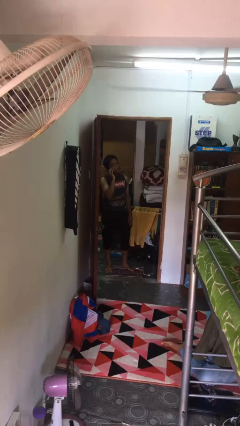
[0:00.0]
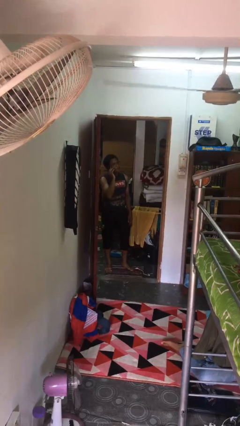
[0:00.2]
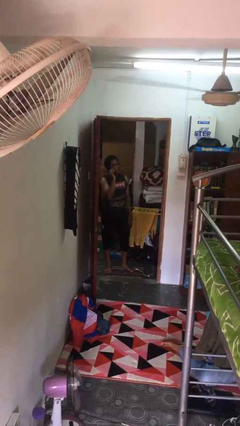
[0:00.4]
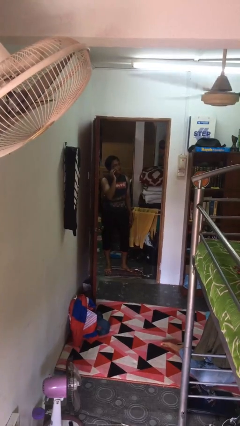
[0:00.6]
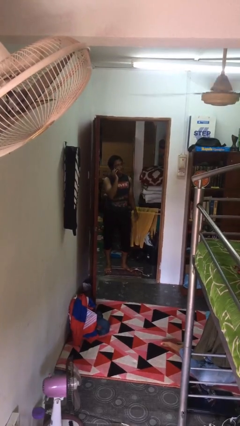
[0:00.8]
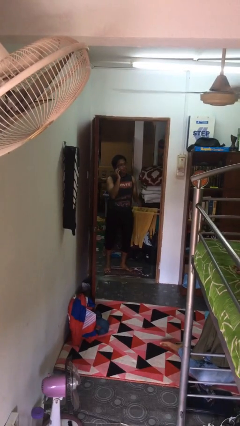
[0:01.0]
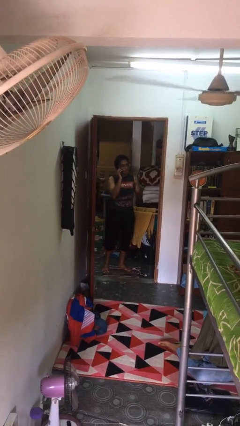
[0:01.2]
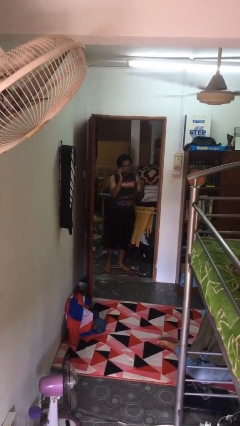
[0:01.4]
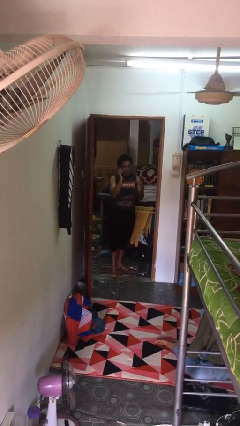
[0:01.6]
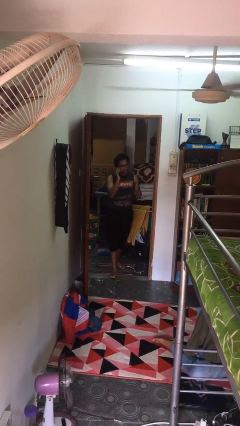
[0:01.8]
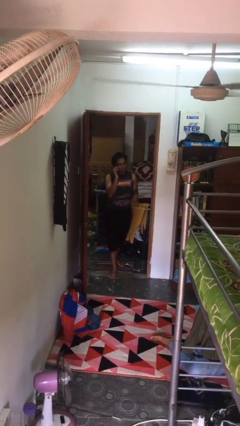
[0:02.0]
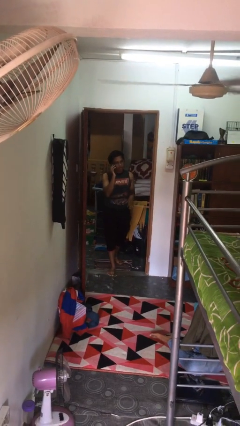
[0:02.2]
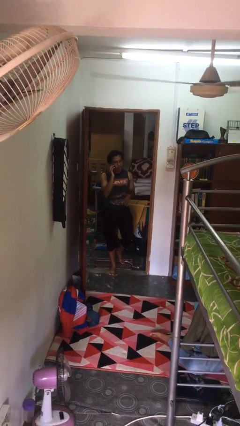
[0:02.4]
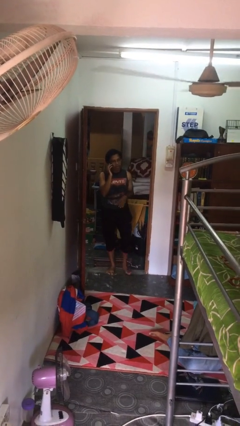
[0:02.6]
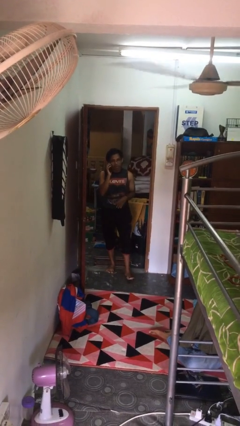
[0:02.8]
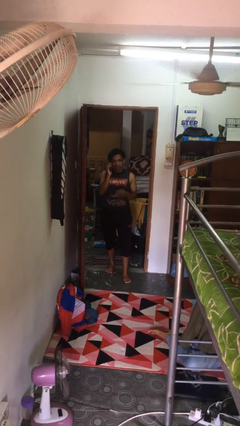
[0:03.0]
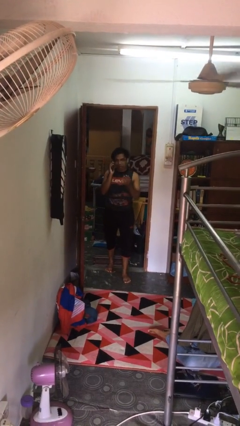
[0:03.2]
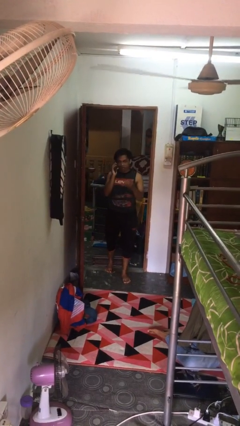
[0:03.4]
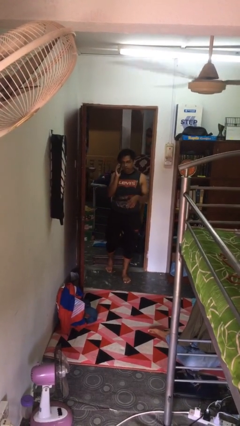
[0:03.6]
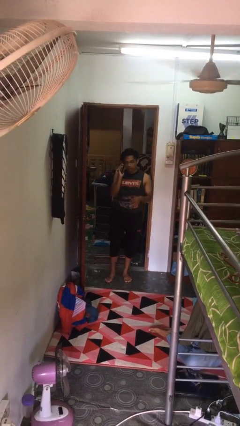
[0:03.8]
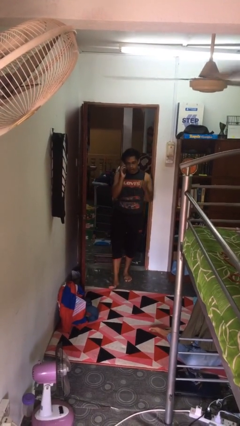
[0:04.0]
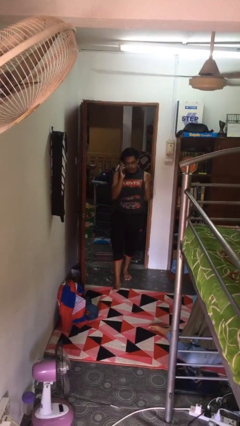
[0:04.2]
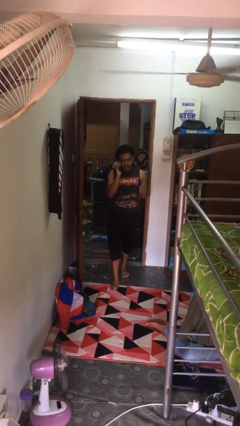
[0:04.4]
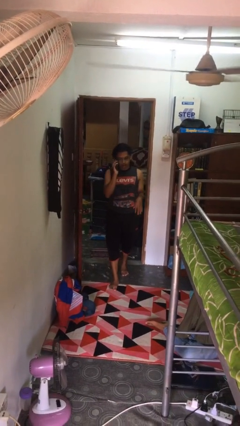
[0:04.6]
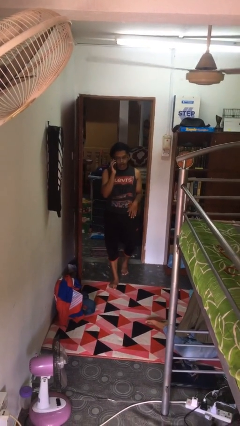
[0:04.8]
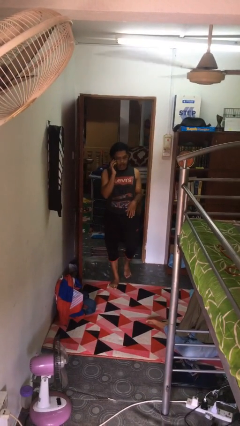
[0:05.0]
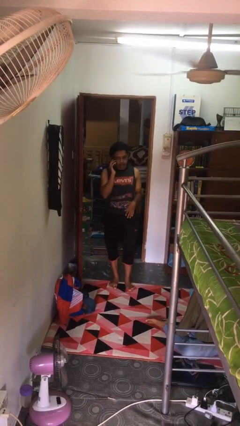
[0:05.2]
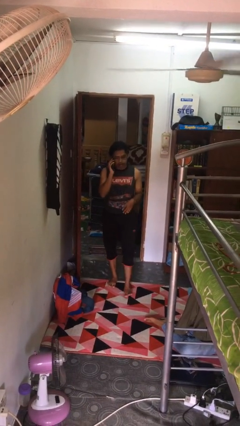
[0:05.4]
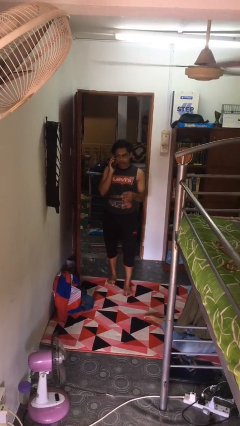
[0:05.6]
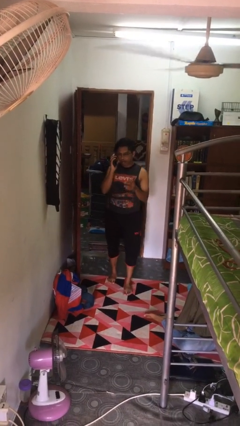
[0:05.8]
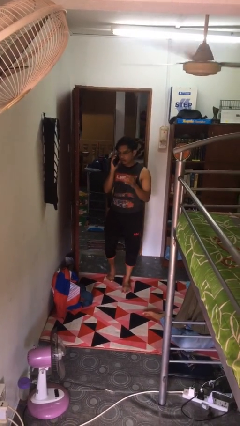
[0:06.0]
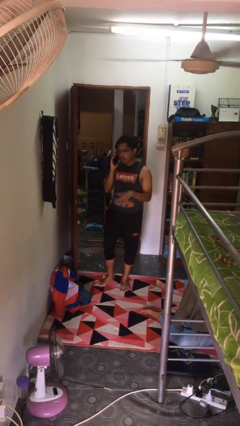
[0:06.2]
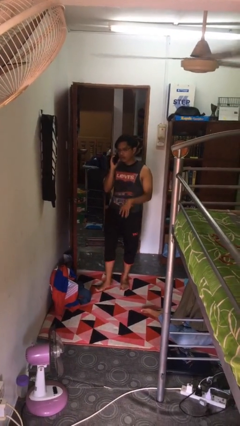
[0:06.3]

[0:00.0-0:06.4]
person enters scene through structure

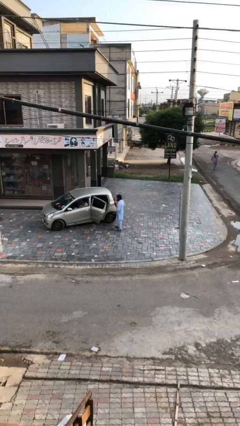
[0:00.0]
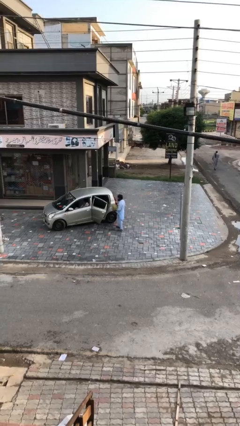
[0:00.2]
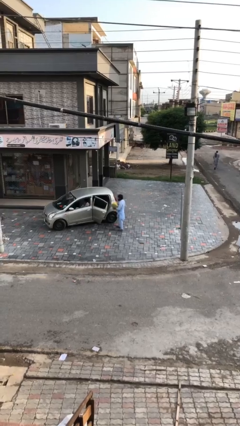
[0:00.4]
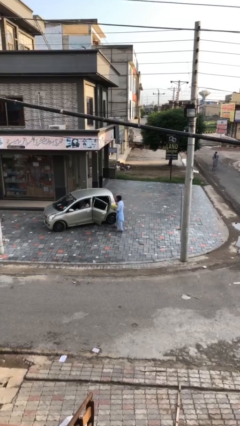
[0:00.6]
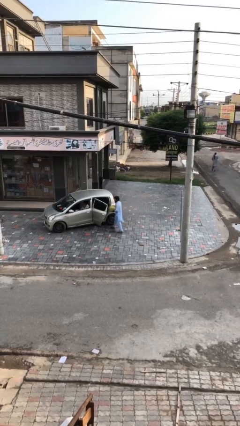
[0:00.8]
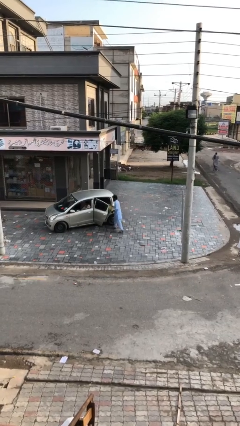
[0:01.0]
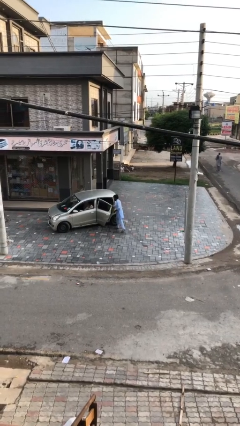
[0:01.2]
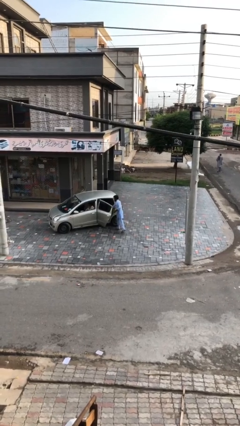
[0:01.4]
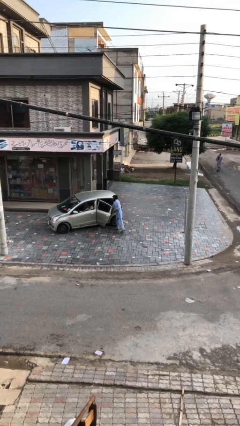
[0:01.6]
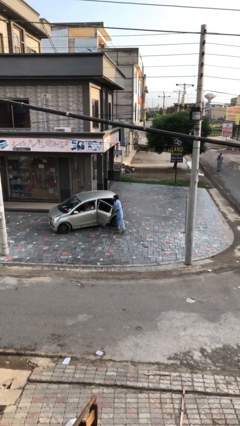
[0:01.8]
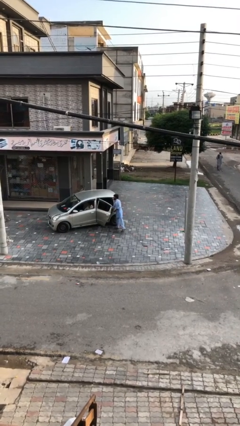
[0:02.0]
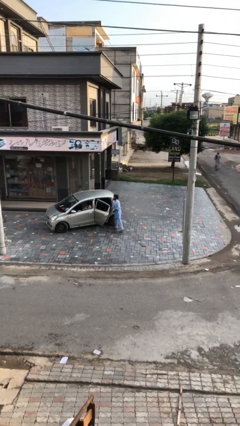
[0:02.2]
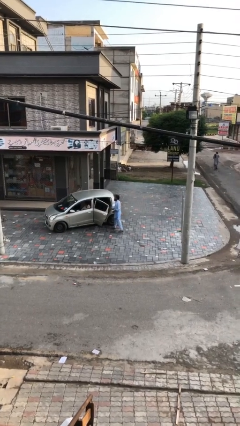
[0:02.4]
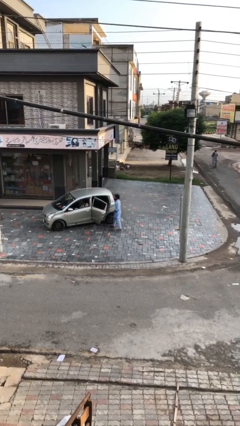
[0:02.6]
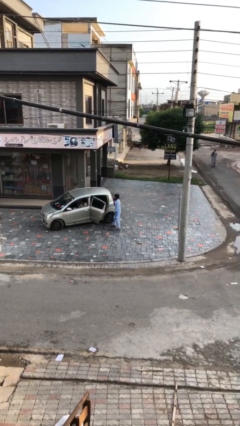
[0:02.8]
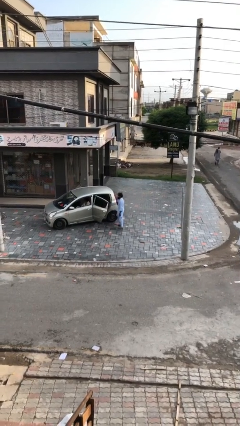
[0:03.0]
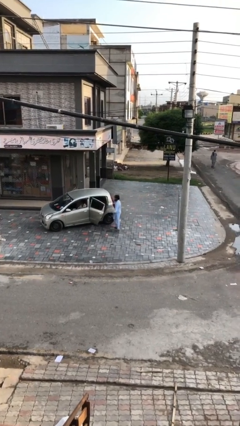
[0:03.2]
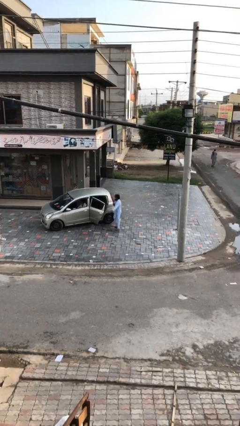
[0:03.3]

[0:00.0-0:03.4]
person loads car

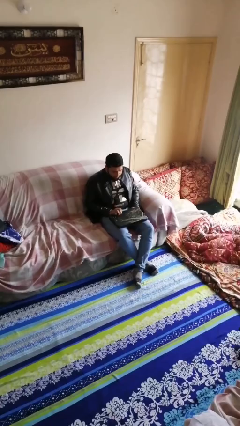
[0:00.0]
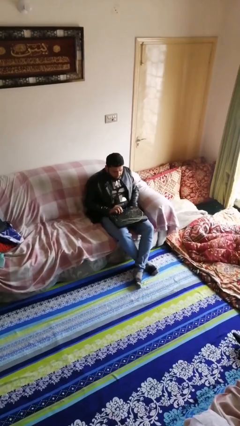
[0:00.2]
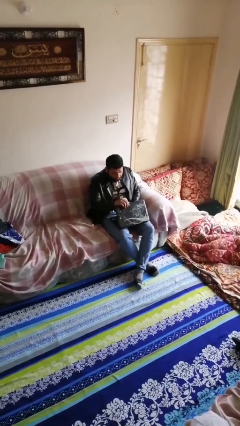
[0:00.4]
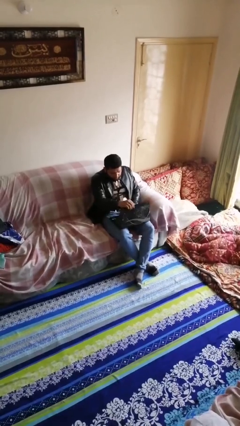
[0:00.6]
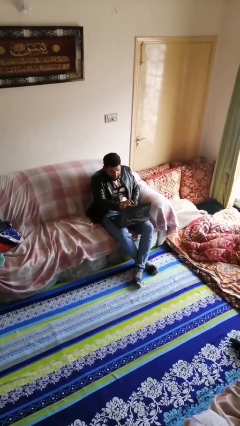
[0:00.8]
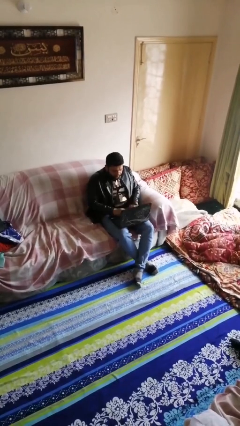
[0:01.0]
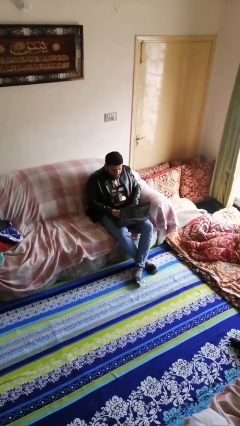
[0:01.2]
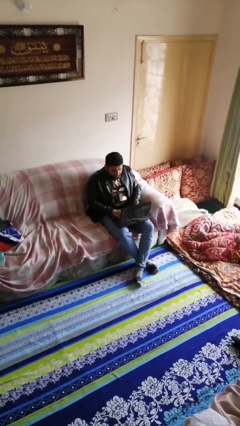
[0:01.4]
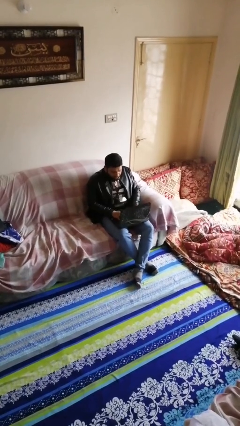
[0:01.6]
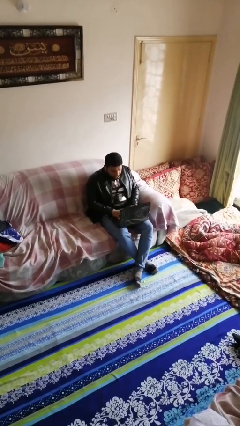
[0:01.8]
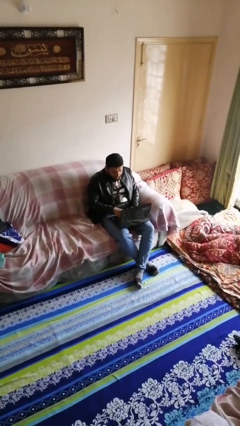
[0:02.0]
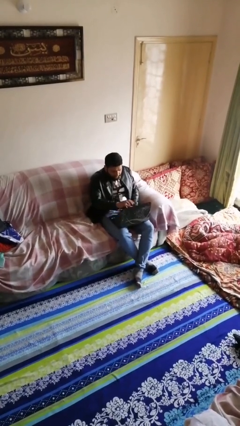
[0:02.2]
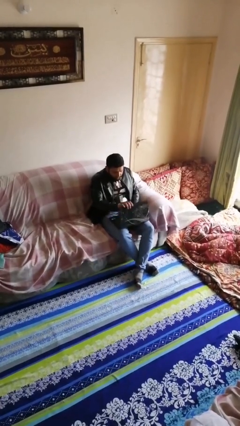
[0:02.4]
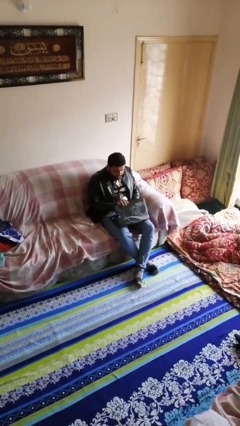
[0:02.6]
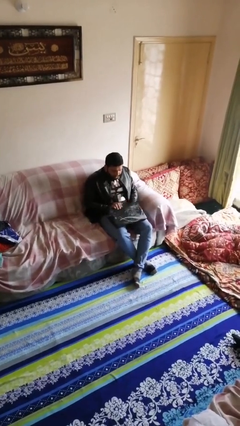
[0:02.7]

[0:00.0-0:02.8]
person interacts with laptop

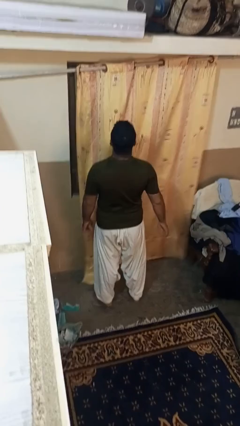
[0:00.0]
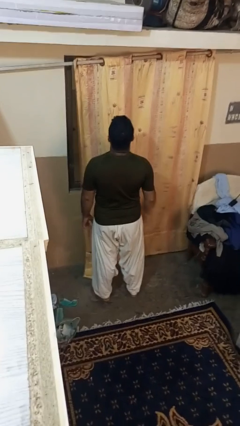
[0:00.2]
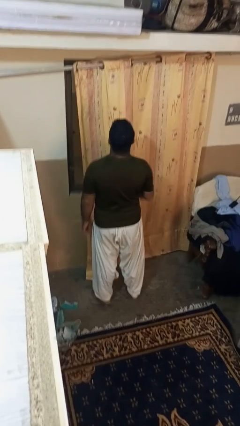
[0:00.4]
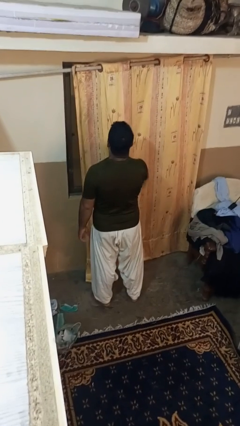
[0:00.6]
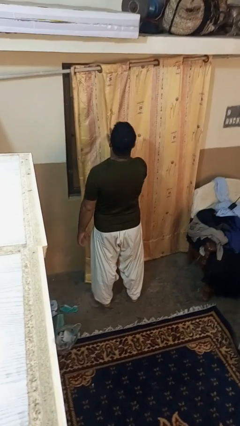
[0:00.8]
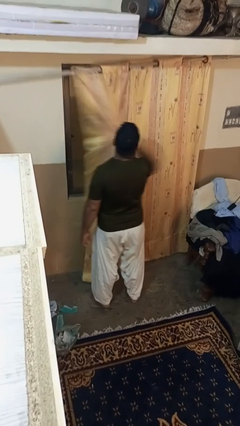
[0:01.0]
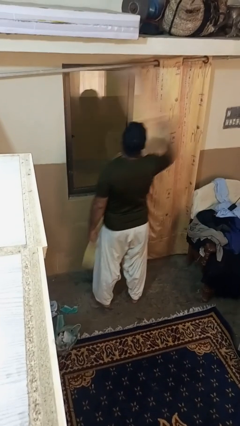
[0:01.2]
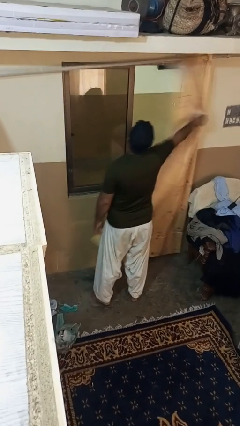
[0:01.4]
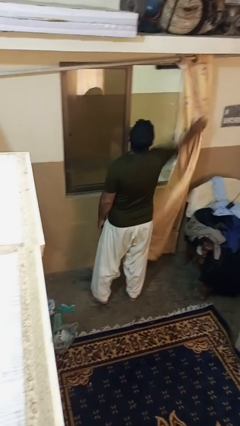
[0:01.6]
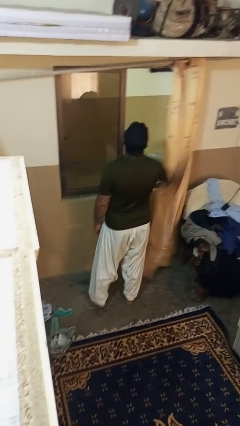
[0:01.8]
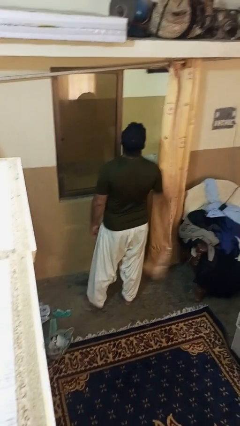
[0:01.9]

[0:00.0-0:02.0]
person opens curtains

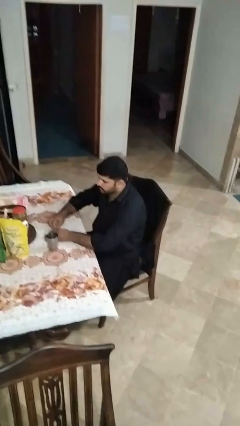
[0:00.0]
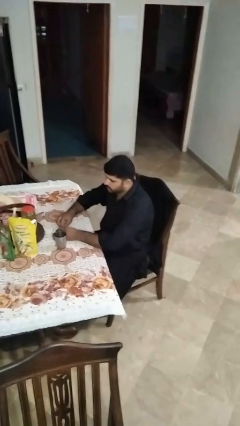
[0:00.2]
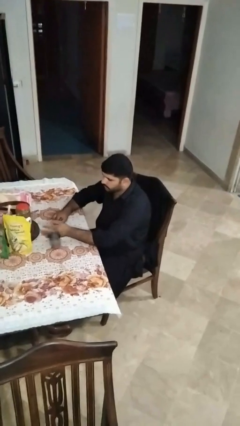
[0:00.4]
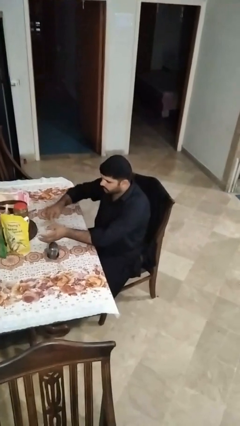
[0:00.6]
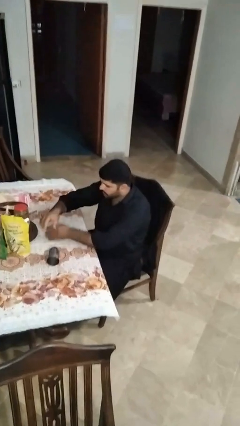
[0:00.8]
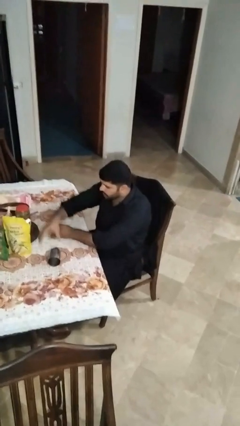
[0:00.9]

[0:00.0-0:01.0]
person knocks over glass

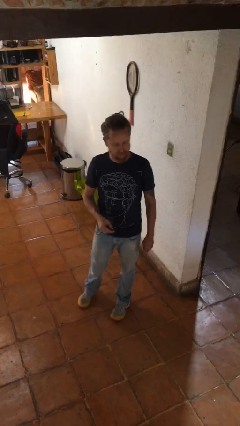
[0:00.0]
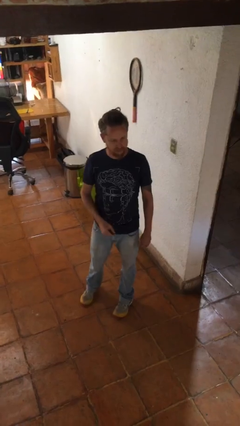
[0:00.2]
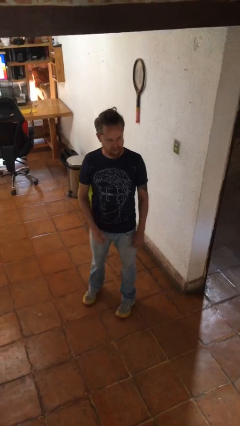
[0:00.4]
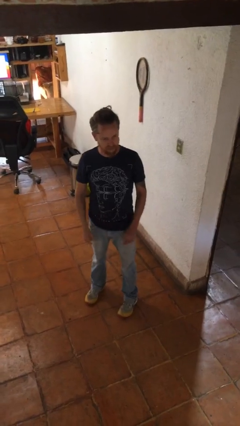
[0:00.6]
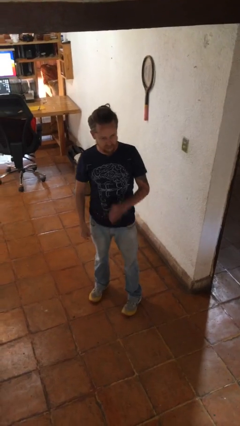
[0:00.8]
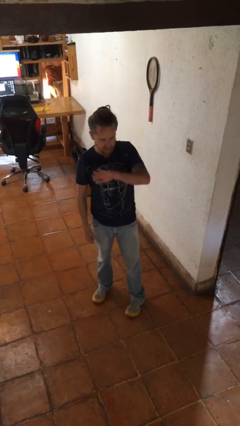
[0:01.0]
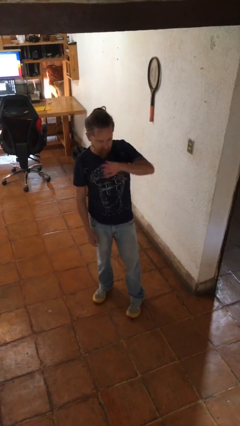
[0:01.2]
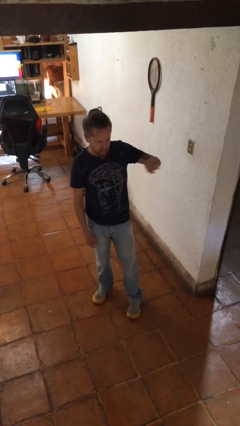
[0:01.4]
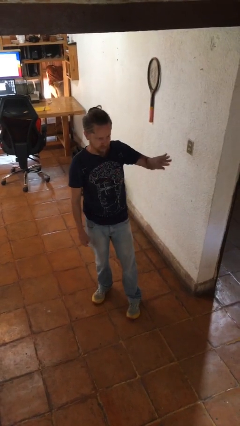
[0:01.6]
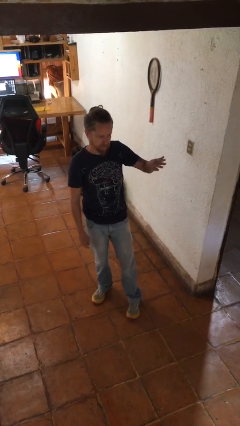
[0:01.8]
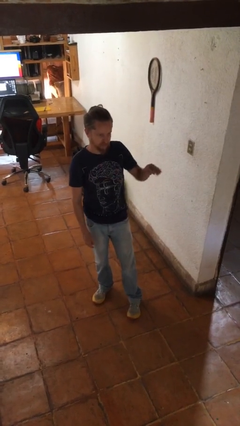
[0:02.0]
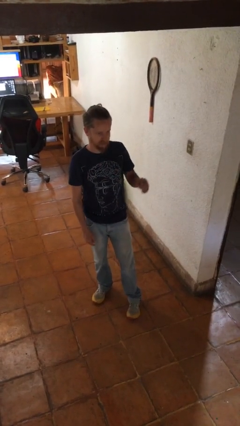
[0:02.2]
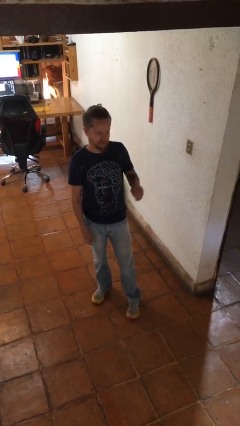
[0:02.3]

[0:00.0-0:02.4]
person gestures swipe left
